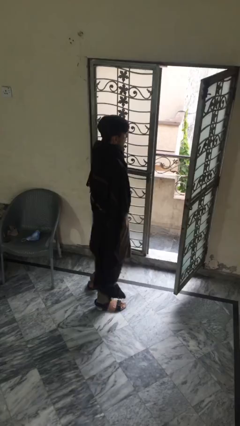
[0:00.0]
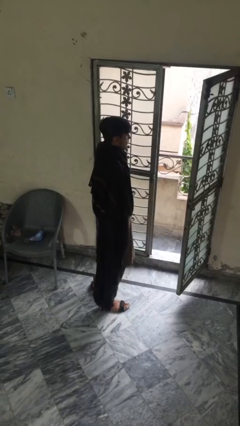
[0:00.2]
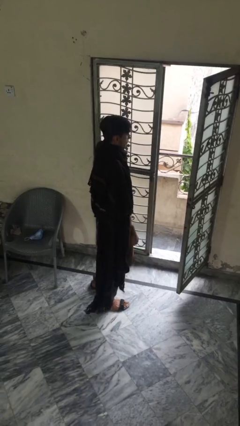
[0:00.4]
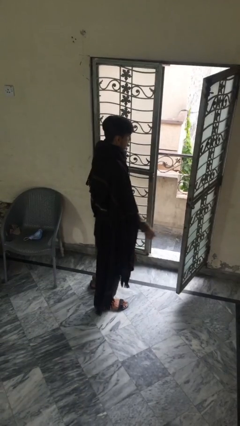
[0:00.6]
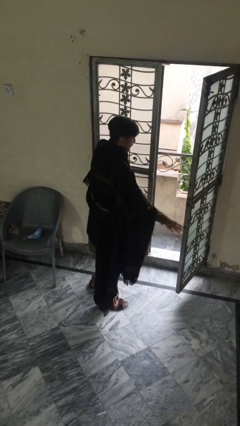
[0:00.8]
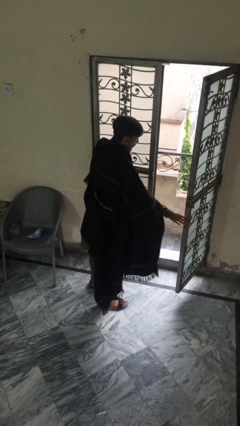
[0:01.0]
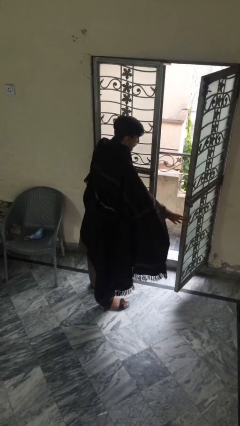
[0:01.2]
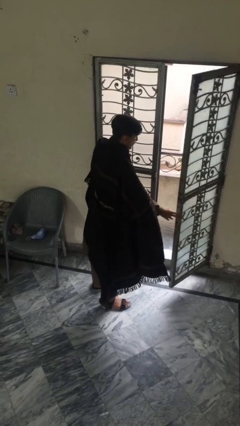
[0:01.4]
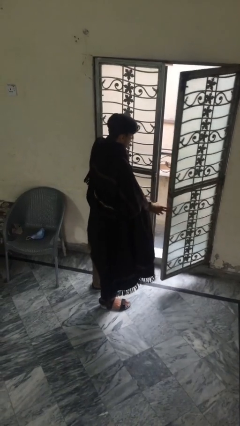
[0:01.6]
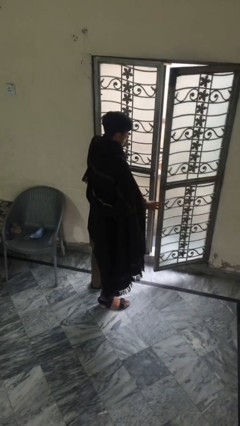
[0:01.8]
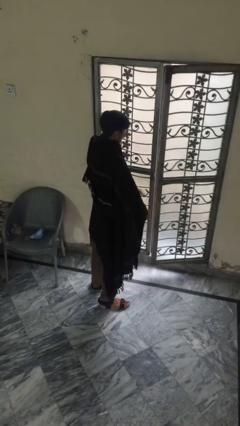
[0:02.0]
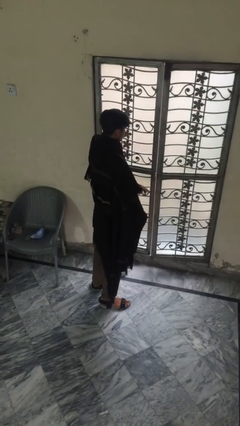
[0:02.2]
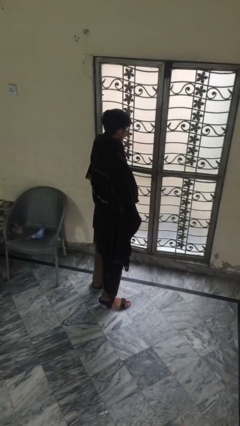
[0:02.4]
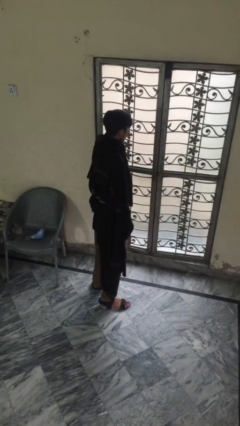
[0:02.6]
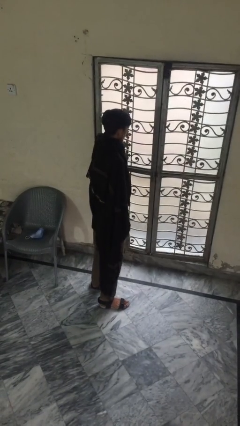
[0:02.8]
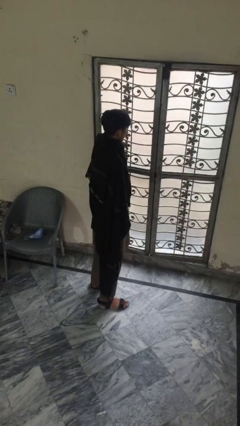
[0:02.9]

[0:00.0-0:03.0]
person closes facility door

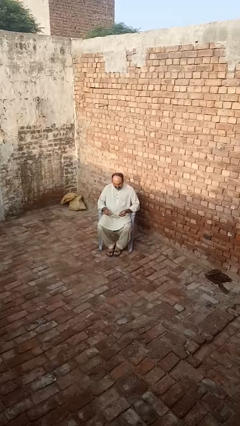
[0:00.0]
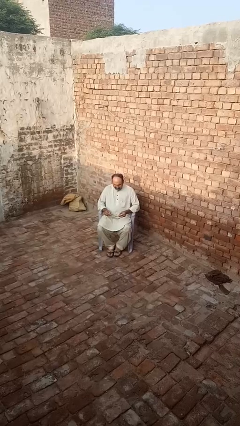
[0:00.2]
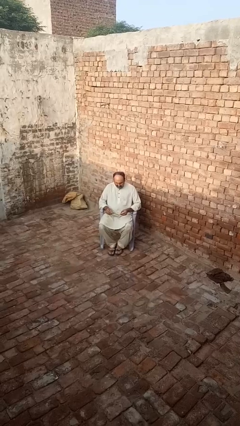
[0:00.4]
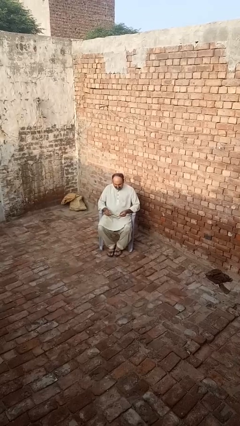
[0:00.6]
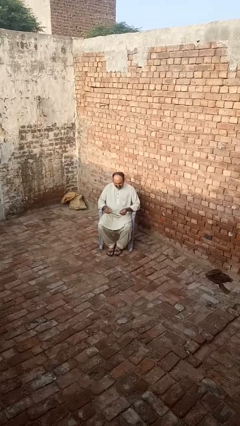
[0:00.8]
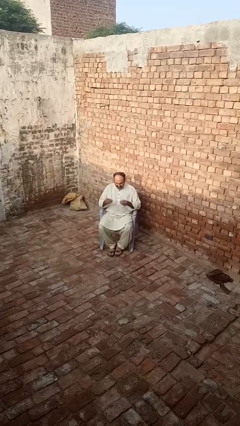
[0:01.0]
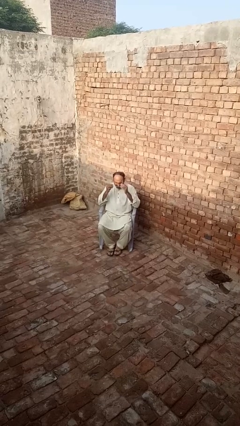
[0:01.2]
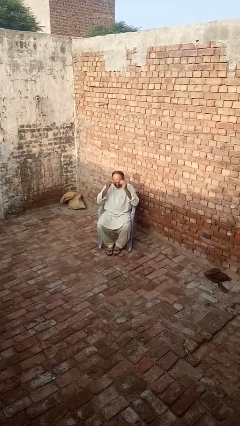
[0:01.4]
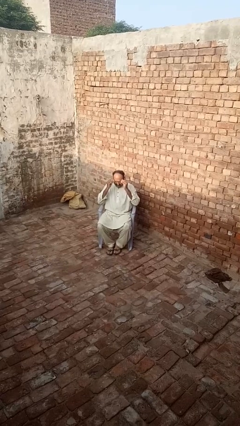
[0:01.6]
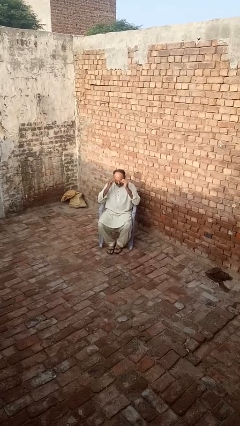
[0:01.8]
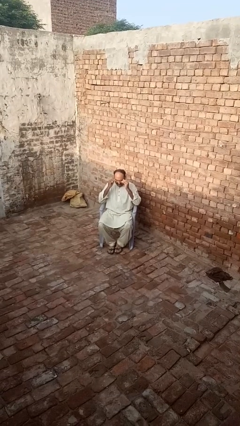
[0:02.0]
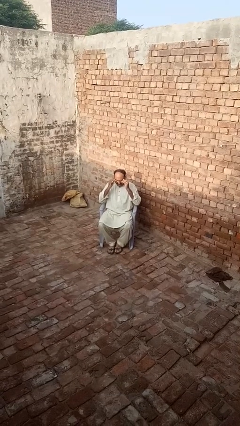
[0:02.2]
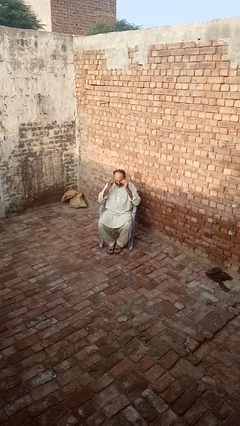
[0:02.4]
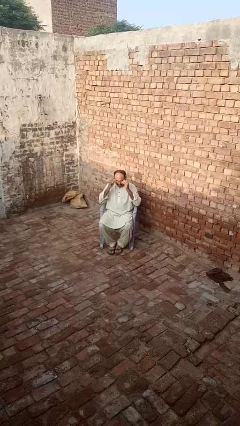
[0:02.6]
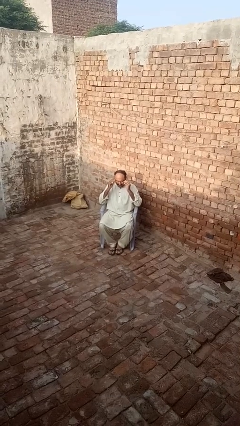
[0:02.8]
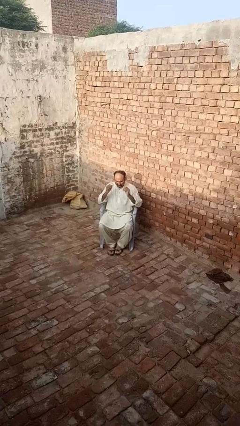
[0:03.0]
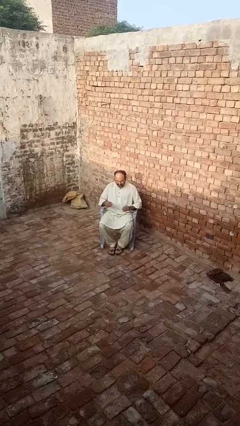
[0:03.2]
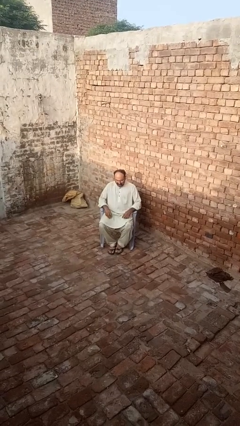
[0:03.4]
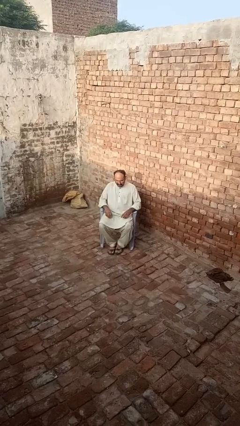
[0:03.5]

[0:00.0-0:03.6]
person puts on glasses

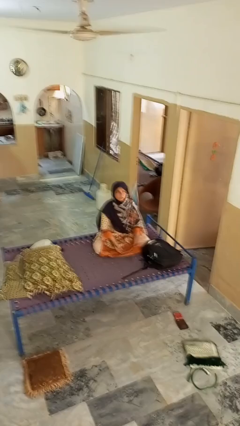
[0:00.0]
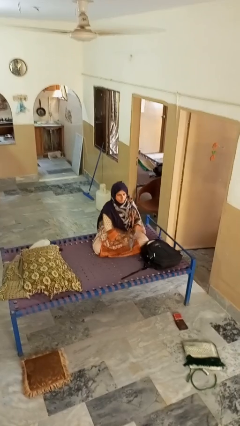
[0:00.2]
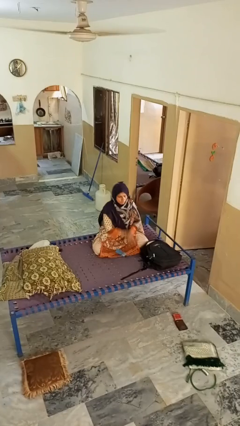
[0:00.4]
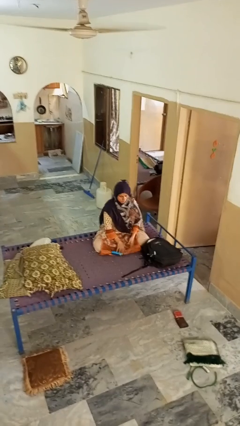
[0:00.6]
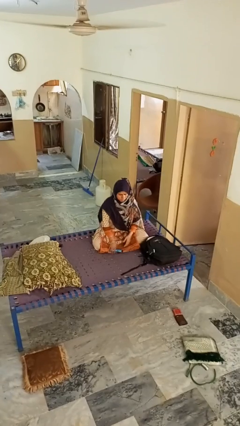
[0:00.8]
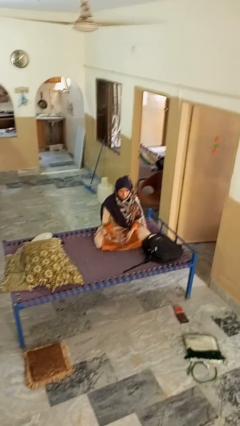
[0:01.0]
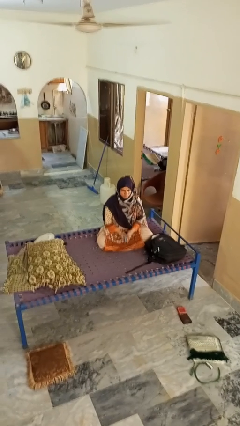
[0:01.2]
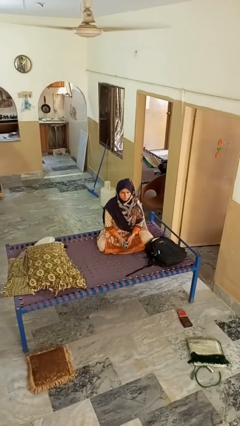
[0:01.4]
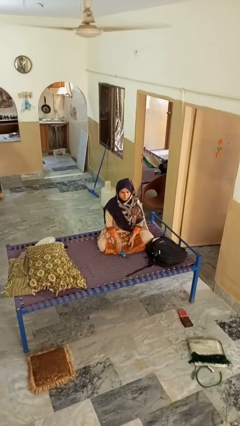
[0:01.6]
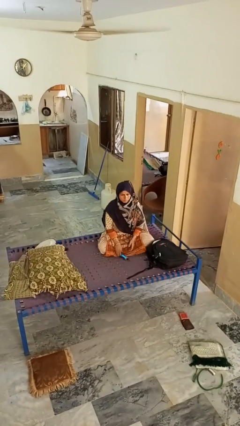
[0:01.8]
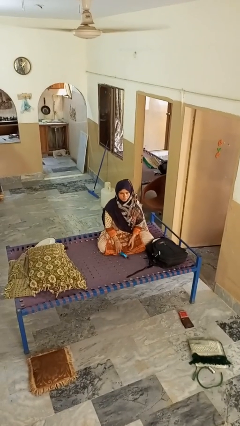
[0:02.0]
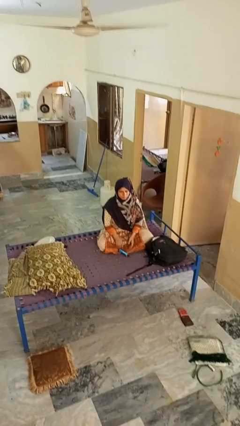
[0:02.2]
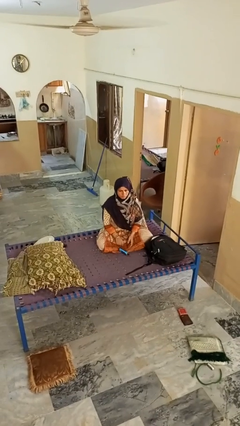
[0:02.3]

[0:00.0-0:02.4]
person catches dropped object

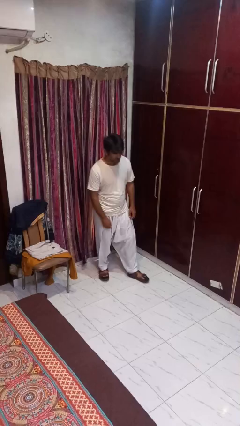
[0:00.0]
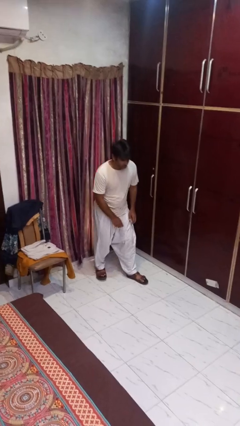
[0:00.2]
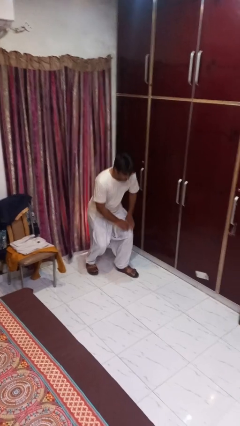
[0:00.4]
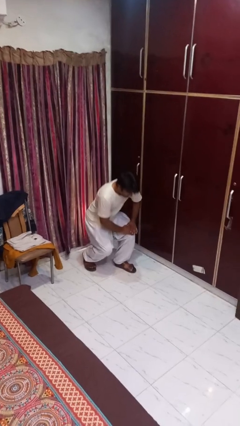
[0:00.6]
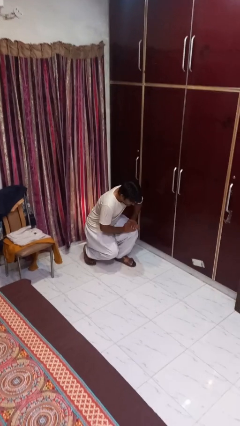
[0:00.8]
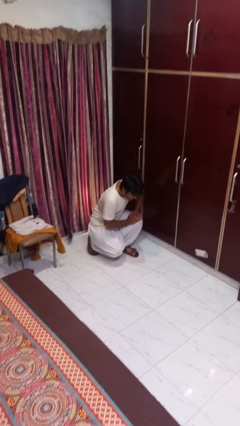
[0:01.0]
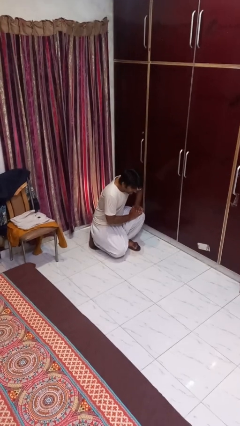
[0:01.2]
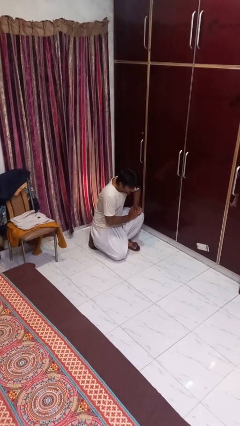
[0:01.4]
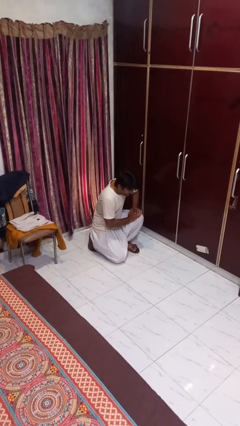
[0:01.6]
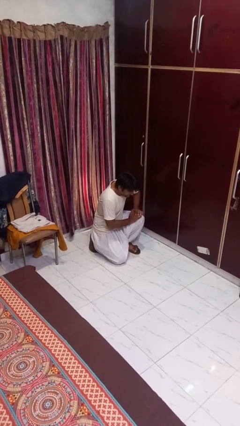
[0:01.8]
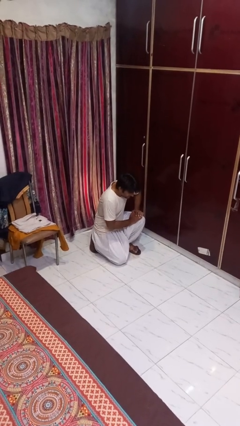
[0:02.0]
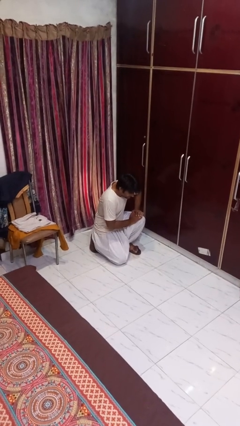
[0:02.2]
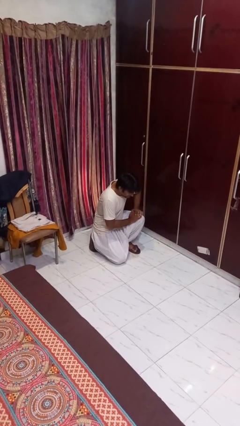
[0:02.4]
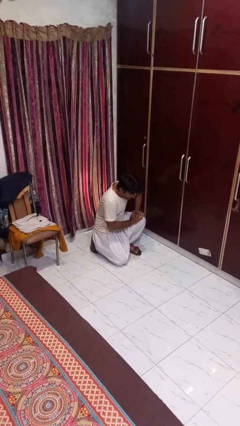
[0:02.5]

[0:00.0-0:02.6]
person kneels

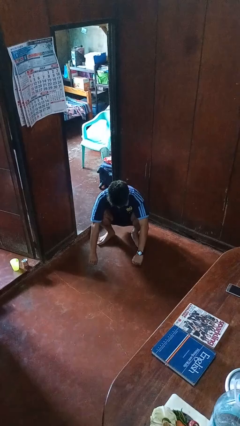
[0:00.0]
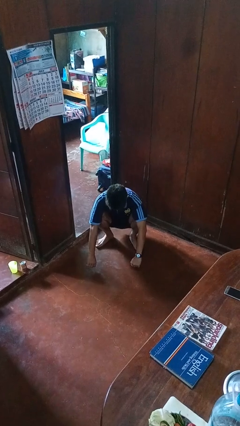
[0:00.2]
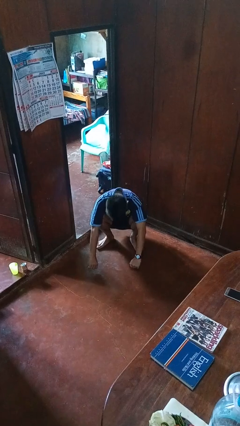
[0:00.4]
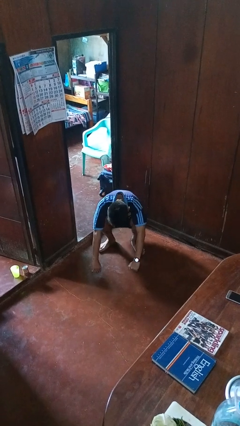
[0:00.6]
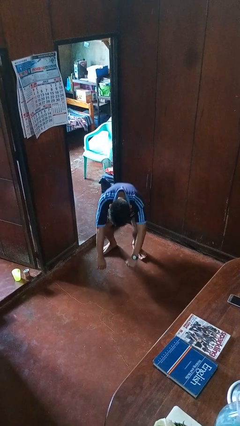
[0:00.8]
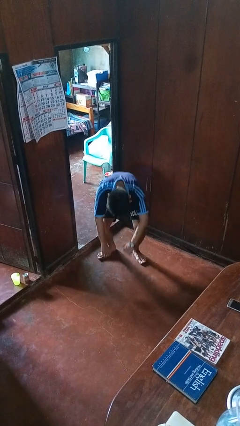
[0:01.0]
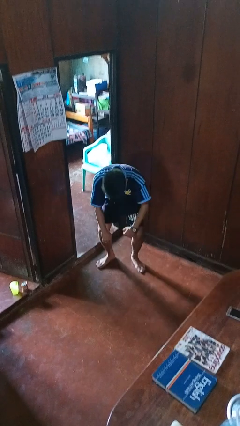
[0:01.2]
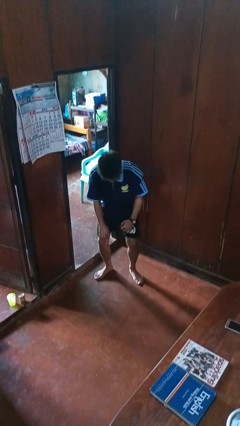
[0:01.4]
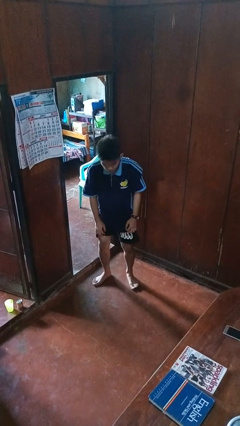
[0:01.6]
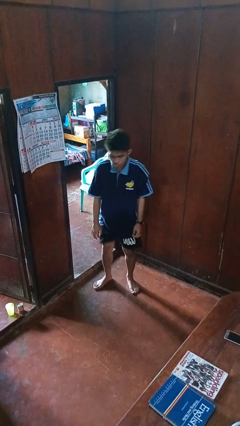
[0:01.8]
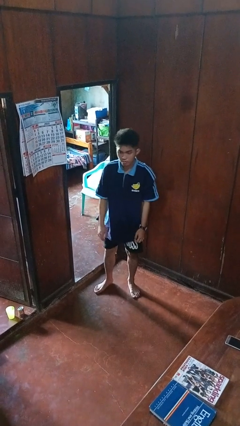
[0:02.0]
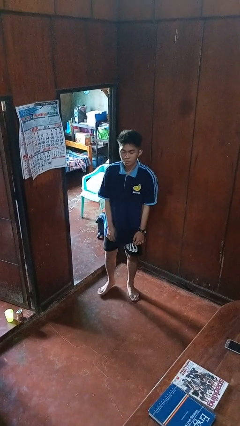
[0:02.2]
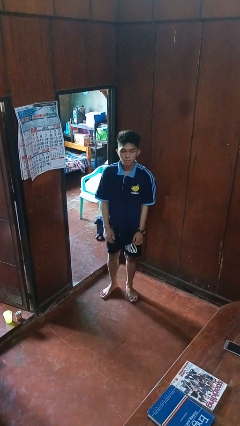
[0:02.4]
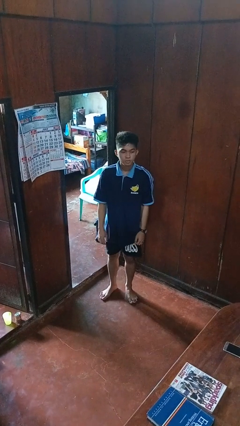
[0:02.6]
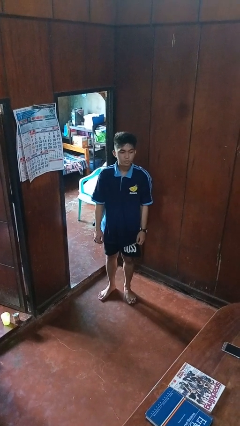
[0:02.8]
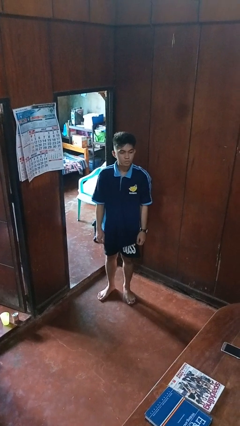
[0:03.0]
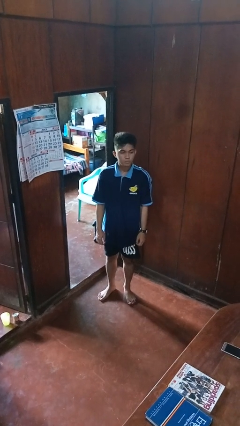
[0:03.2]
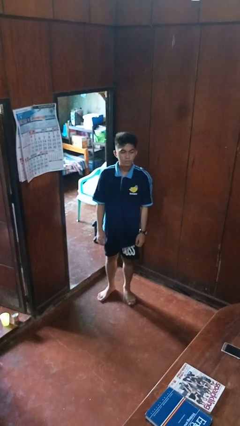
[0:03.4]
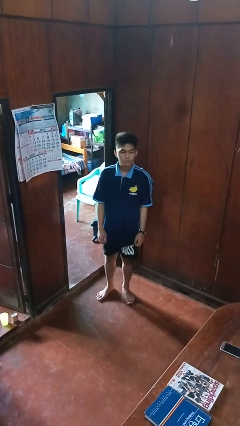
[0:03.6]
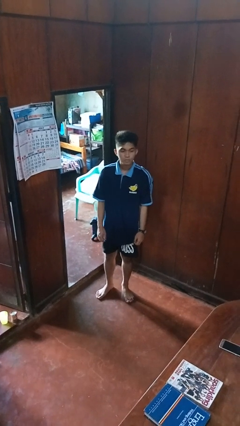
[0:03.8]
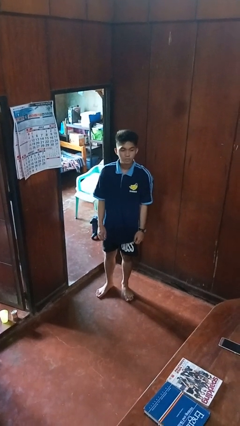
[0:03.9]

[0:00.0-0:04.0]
person stands up

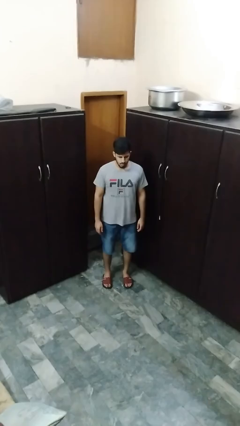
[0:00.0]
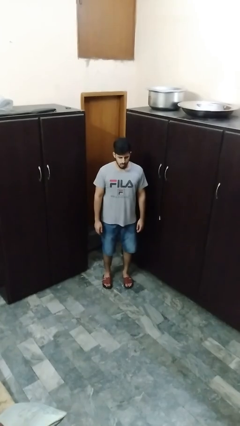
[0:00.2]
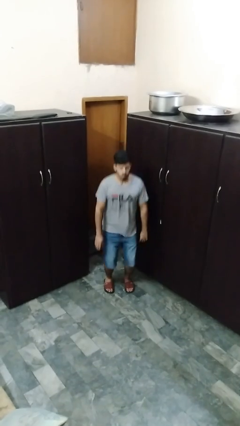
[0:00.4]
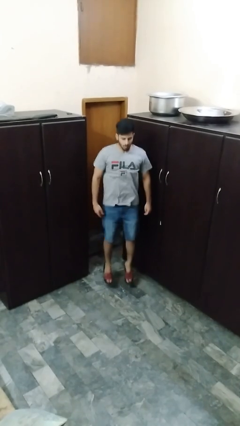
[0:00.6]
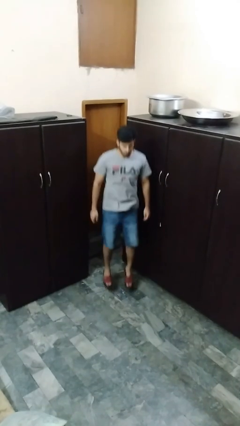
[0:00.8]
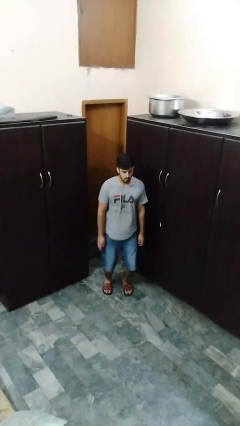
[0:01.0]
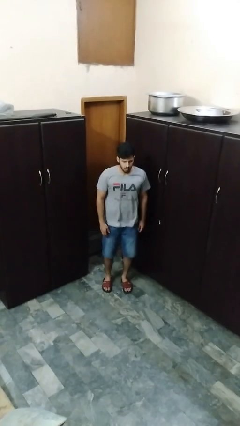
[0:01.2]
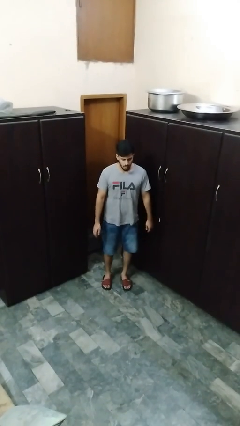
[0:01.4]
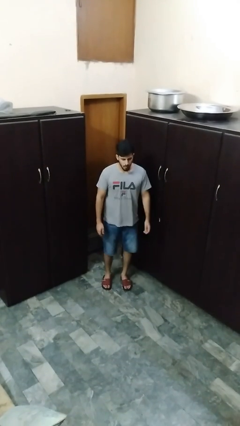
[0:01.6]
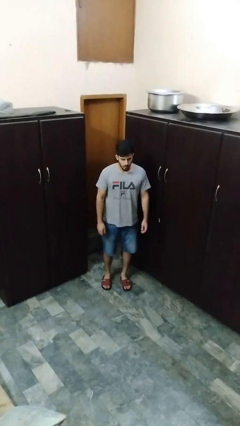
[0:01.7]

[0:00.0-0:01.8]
person jumps
